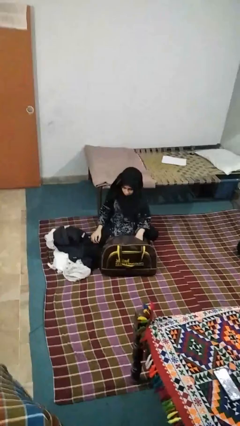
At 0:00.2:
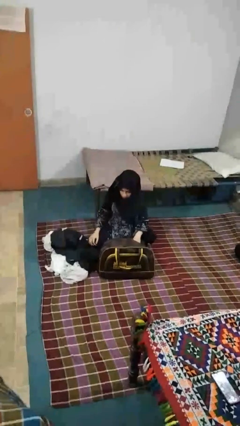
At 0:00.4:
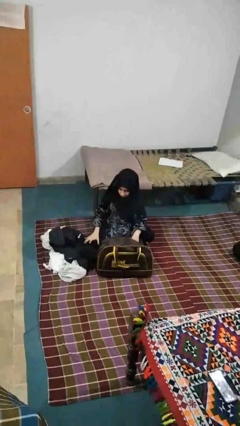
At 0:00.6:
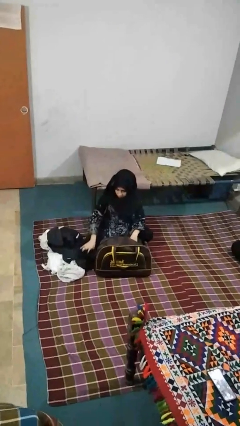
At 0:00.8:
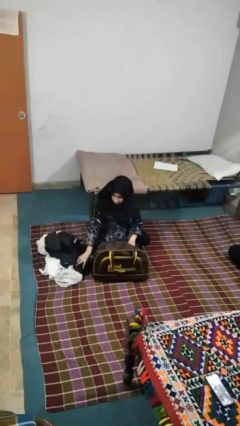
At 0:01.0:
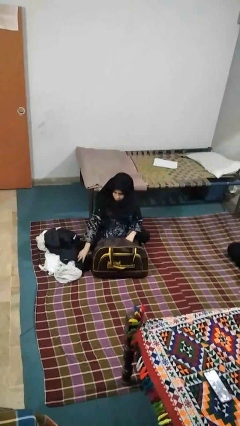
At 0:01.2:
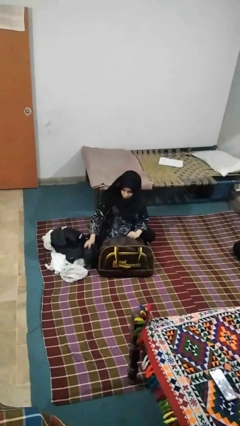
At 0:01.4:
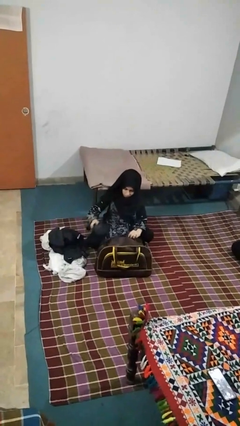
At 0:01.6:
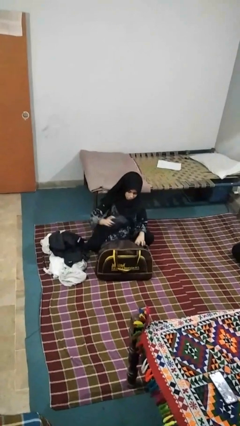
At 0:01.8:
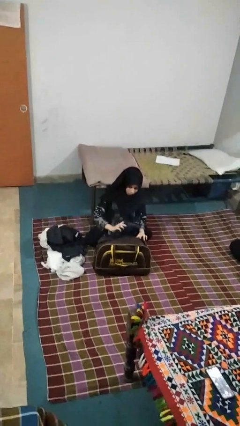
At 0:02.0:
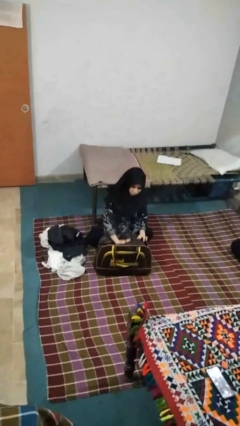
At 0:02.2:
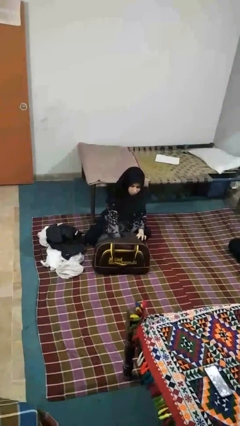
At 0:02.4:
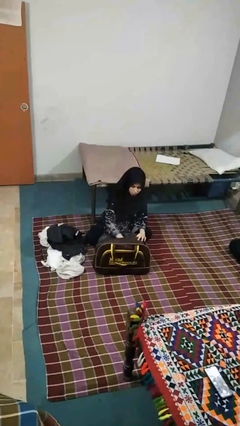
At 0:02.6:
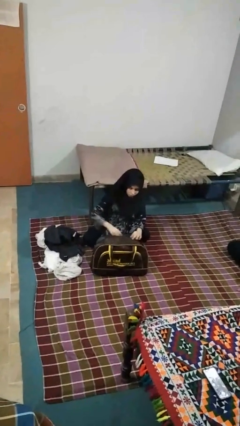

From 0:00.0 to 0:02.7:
person loads clothes into suitcase

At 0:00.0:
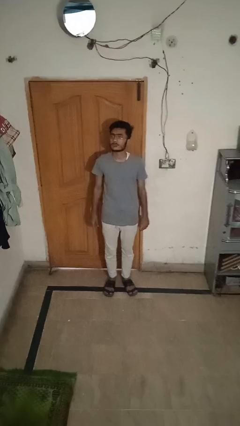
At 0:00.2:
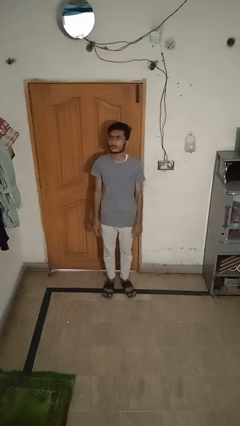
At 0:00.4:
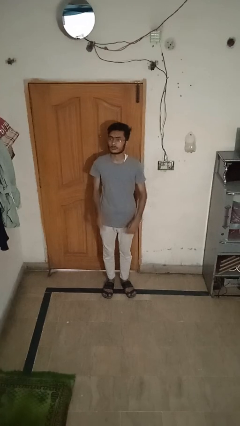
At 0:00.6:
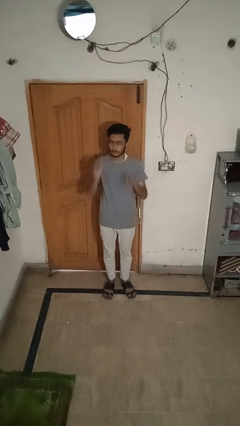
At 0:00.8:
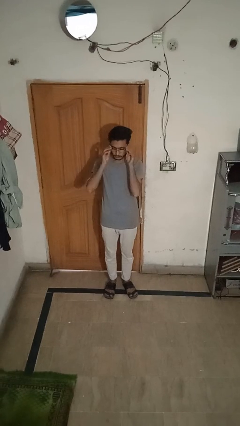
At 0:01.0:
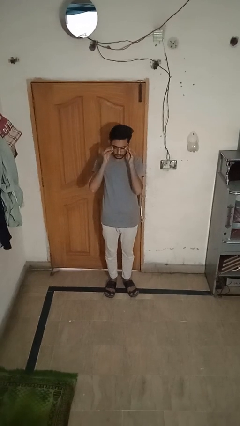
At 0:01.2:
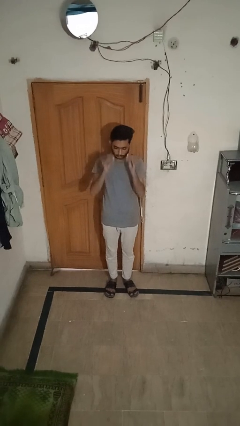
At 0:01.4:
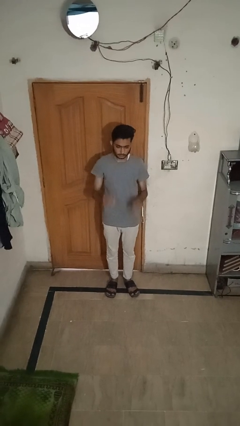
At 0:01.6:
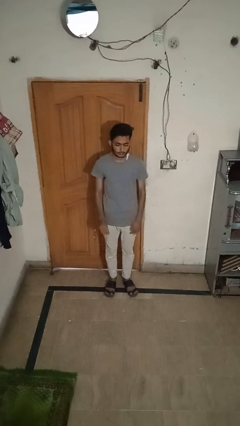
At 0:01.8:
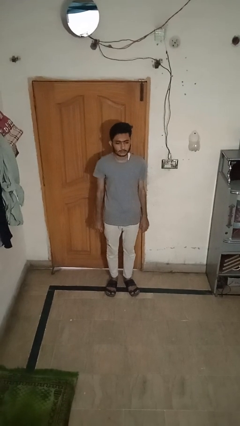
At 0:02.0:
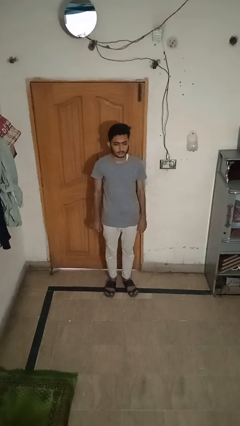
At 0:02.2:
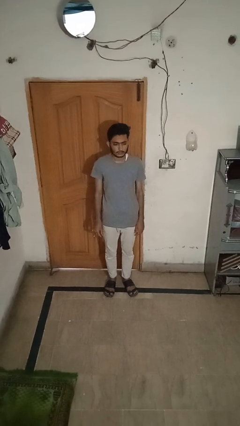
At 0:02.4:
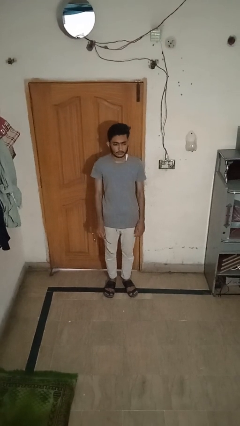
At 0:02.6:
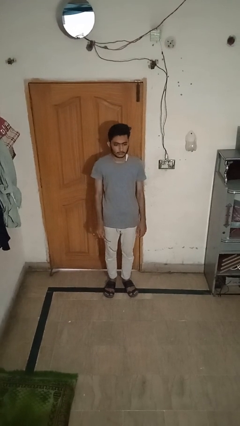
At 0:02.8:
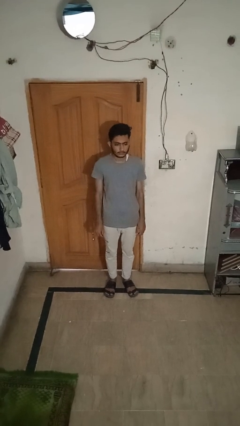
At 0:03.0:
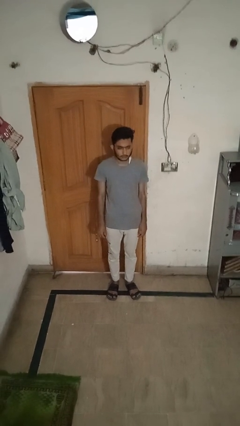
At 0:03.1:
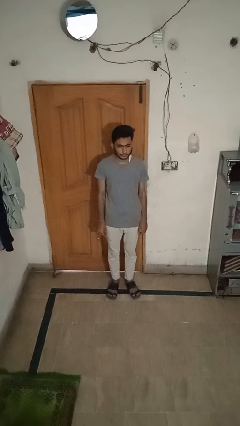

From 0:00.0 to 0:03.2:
person takes off glasses

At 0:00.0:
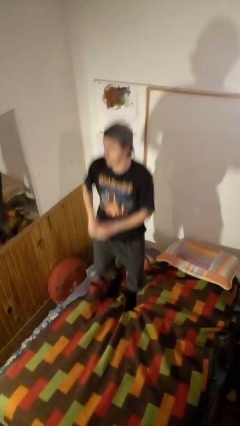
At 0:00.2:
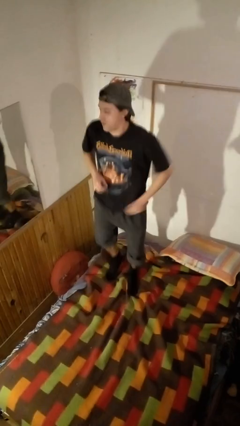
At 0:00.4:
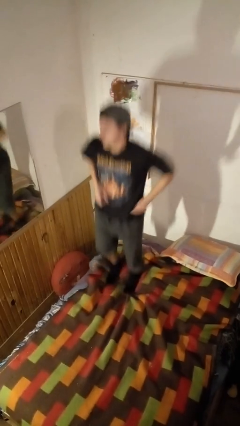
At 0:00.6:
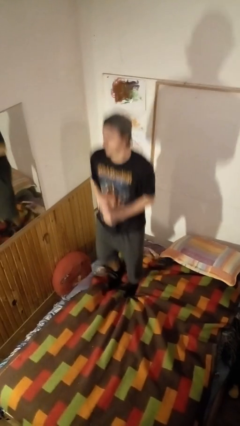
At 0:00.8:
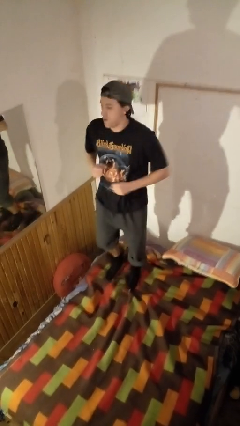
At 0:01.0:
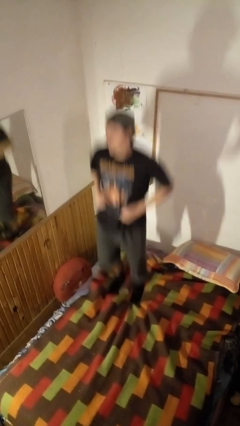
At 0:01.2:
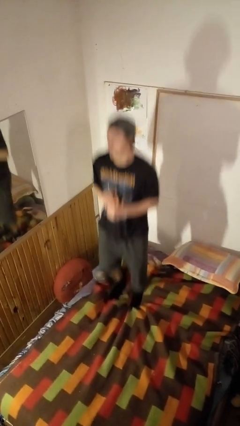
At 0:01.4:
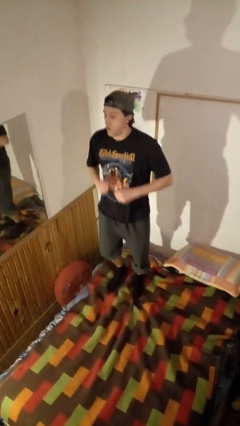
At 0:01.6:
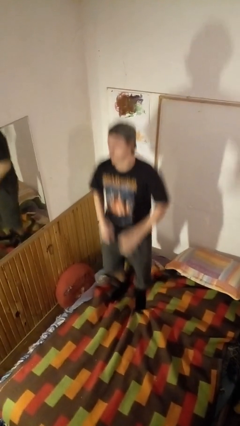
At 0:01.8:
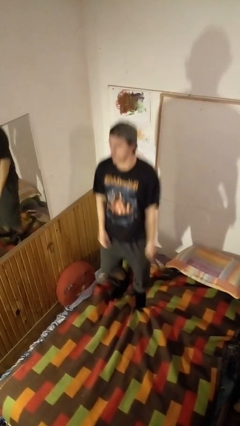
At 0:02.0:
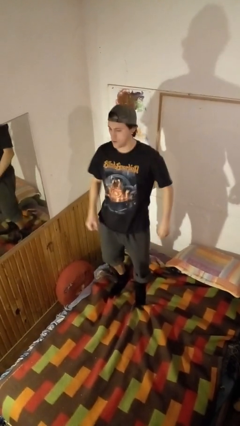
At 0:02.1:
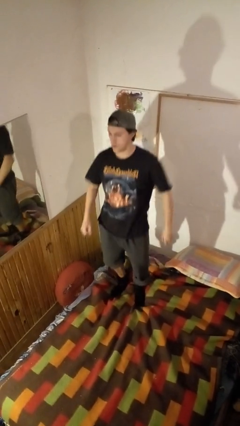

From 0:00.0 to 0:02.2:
person jumps on bed

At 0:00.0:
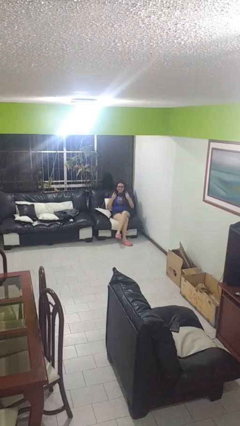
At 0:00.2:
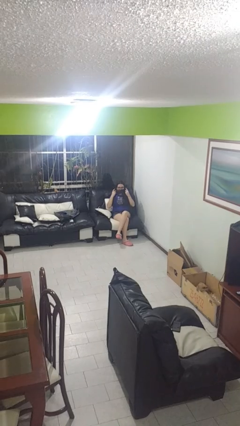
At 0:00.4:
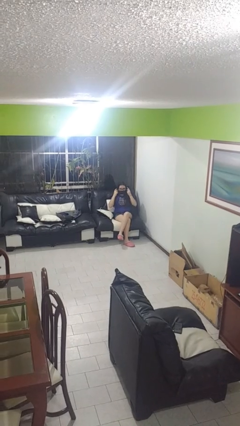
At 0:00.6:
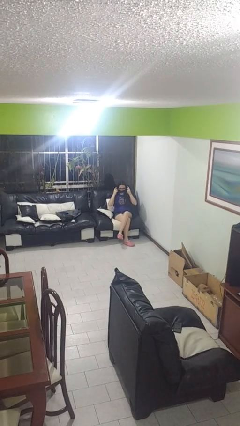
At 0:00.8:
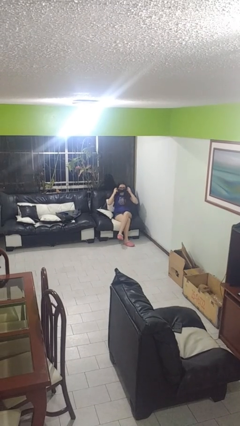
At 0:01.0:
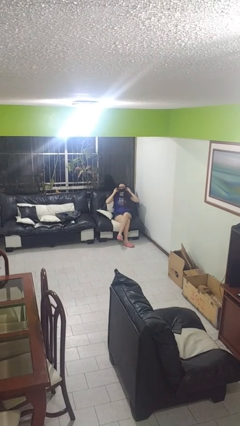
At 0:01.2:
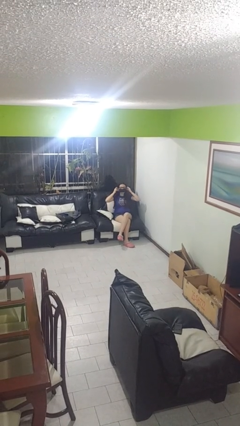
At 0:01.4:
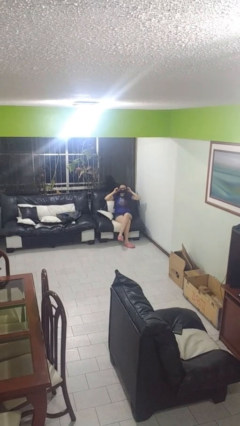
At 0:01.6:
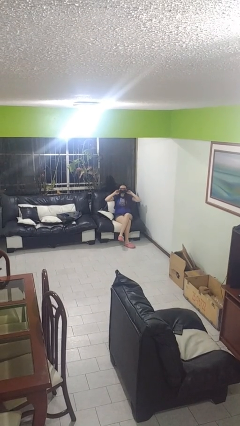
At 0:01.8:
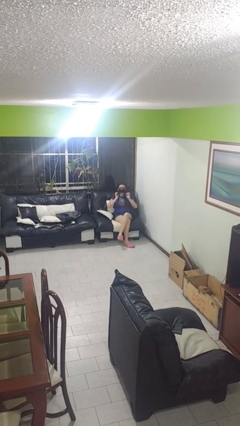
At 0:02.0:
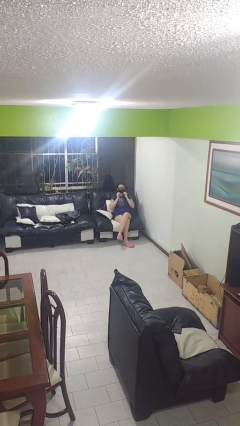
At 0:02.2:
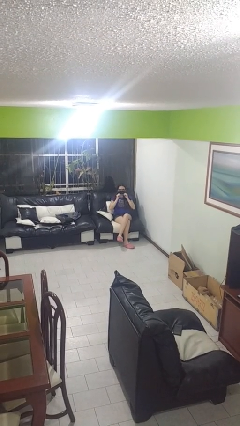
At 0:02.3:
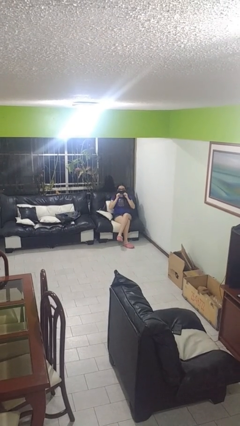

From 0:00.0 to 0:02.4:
person puts on facemask

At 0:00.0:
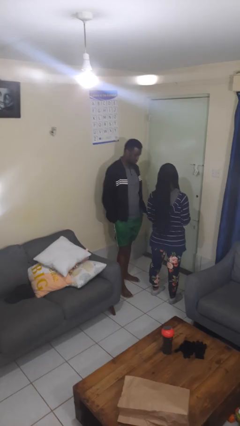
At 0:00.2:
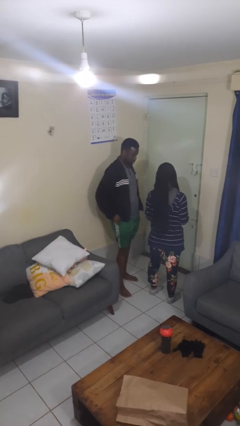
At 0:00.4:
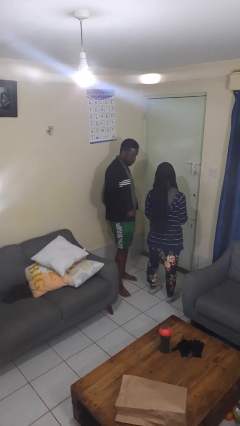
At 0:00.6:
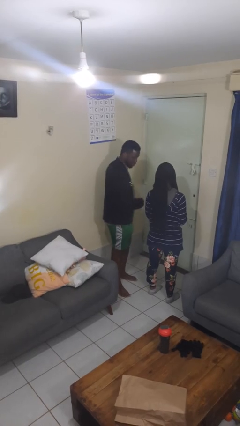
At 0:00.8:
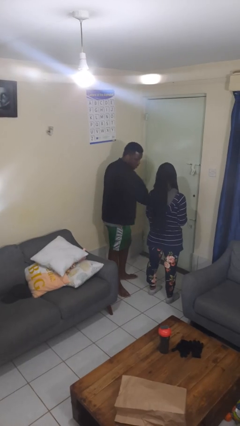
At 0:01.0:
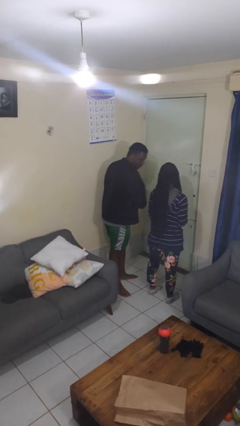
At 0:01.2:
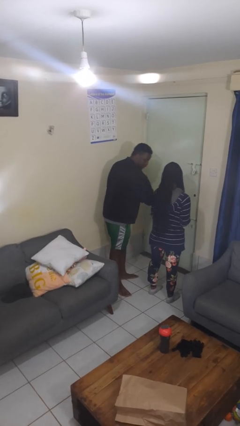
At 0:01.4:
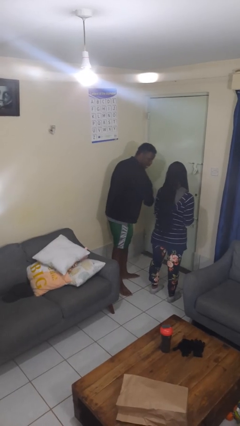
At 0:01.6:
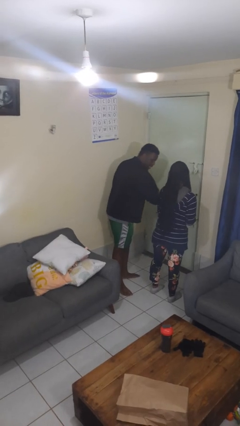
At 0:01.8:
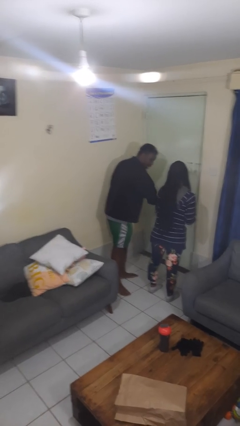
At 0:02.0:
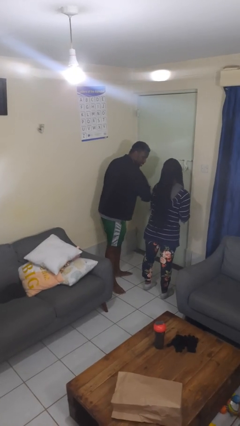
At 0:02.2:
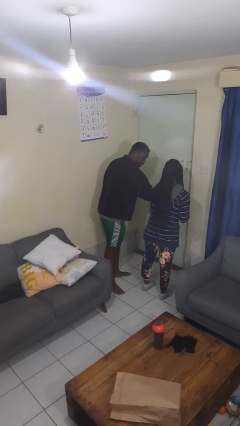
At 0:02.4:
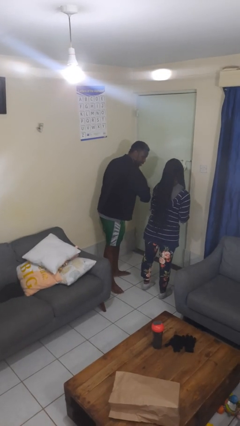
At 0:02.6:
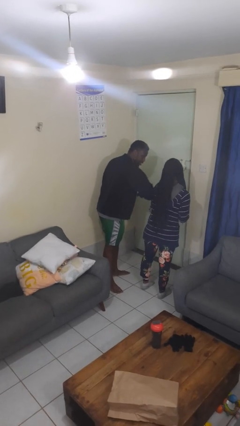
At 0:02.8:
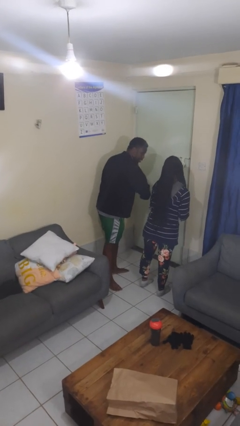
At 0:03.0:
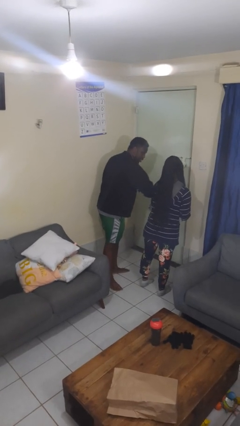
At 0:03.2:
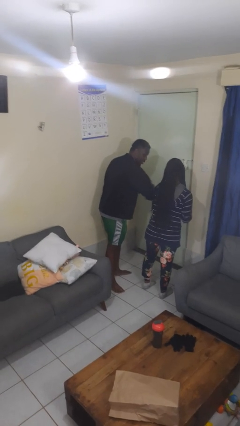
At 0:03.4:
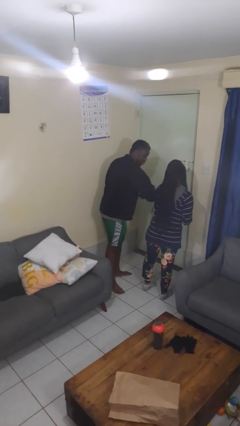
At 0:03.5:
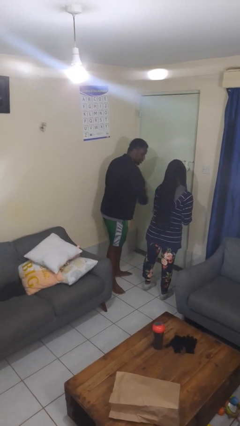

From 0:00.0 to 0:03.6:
person nudges person with elbow

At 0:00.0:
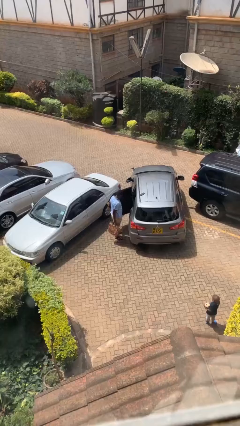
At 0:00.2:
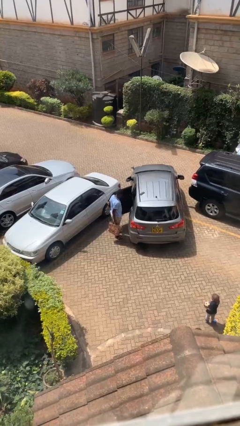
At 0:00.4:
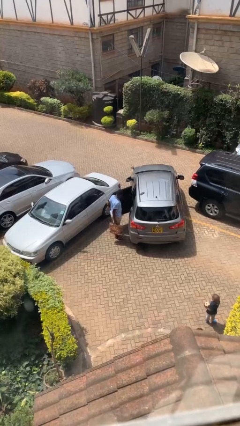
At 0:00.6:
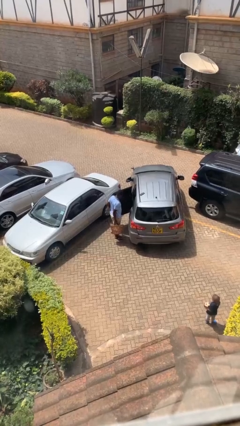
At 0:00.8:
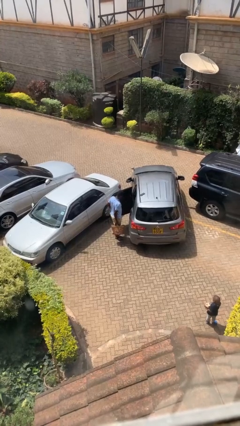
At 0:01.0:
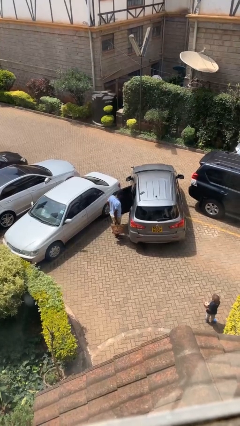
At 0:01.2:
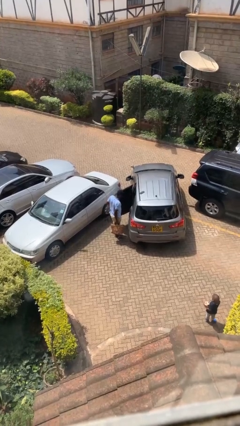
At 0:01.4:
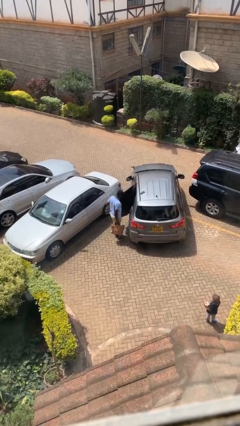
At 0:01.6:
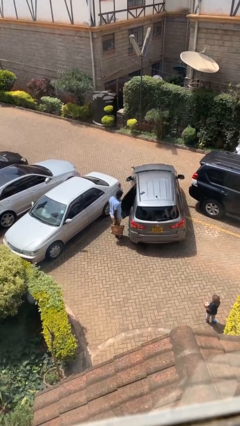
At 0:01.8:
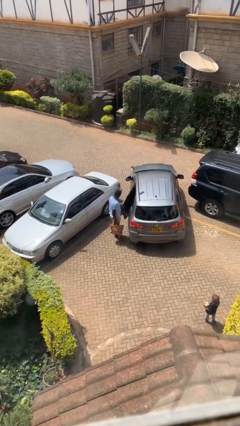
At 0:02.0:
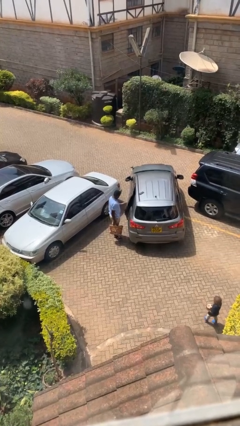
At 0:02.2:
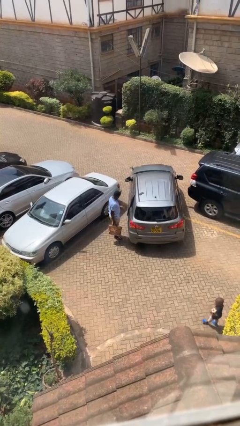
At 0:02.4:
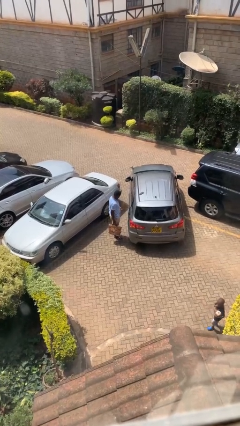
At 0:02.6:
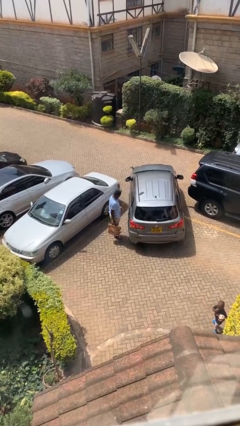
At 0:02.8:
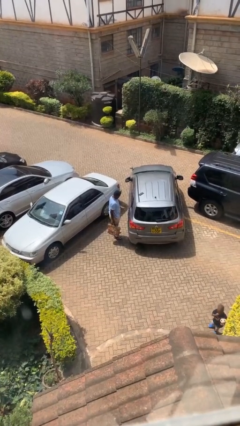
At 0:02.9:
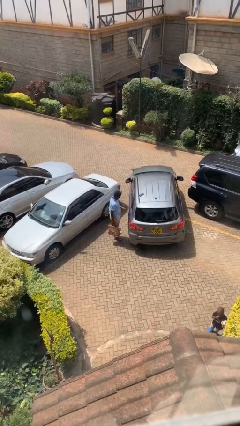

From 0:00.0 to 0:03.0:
person closes car door
